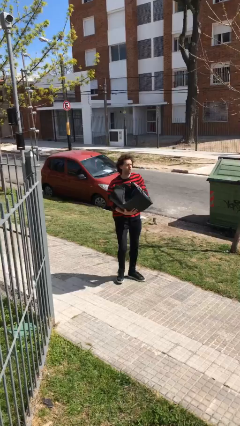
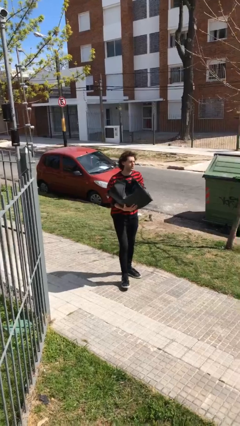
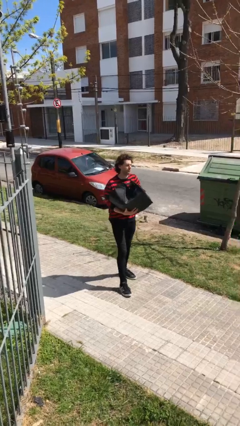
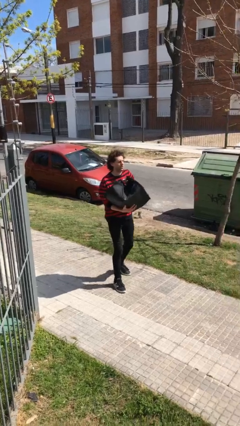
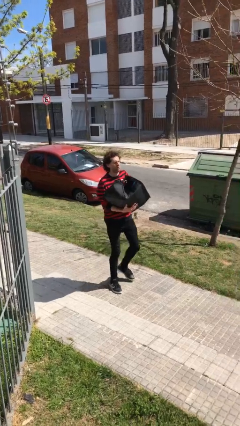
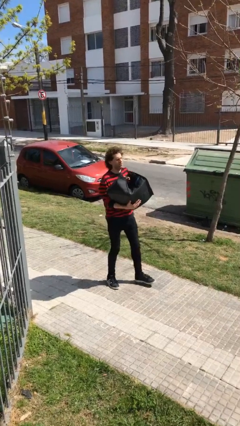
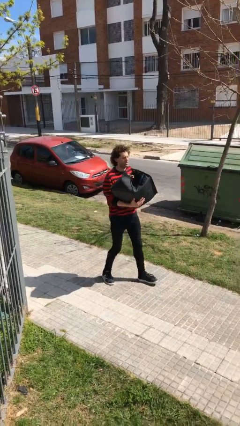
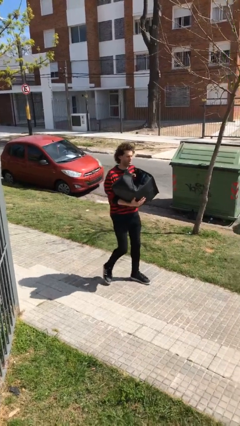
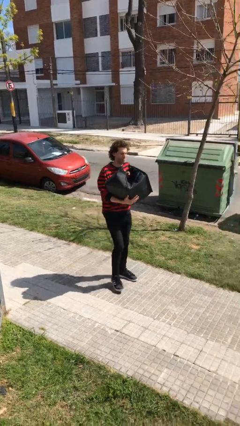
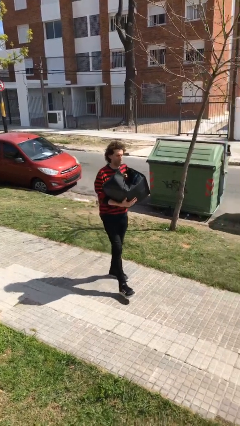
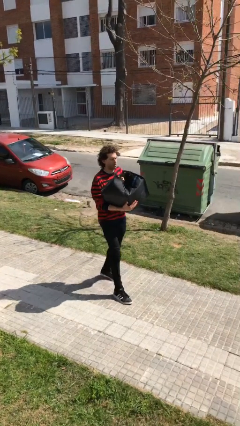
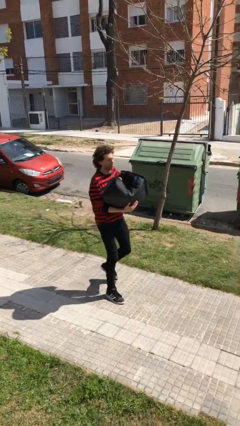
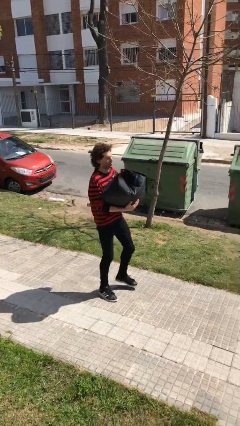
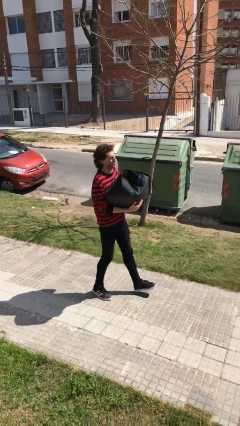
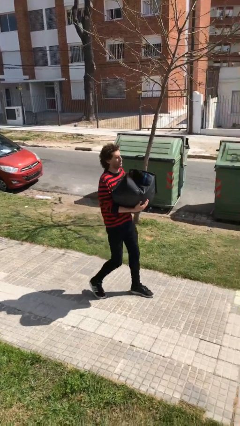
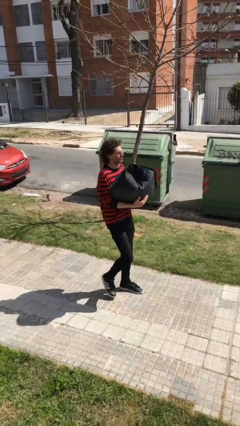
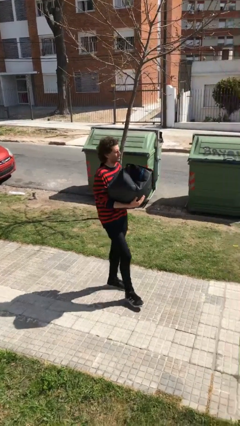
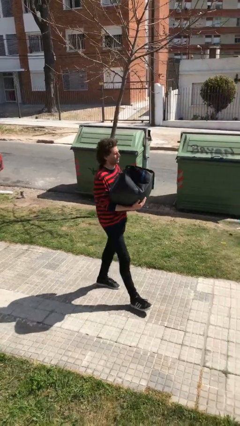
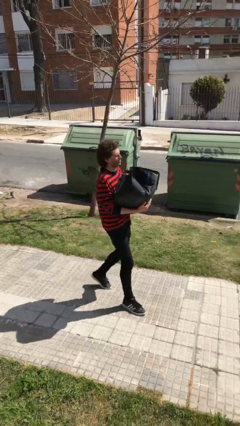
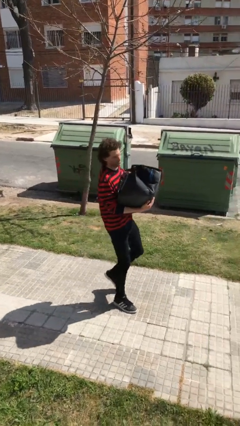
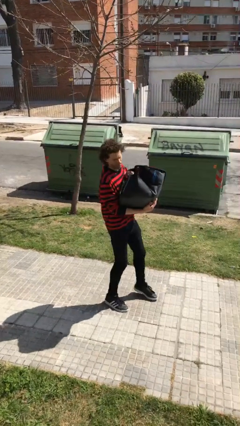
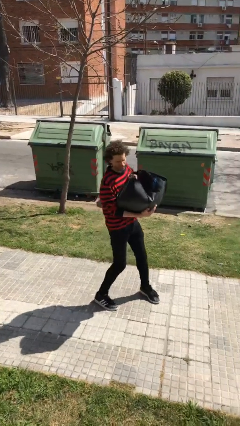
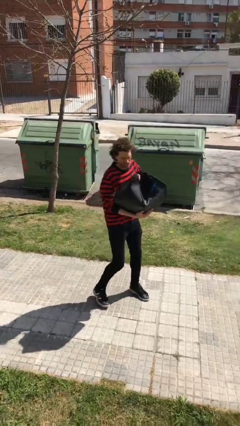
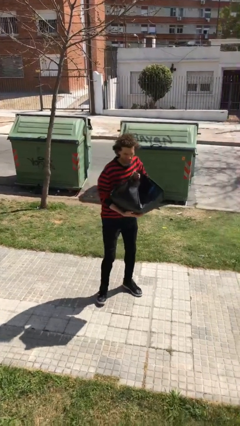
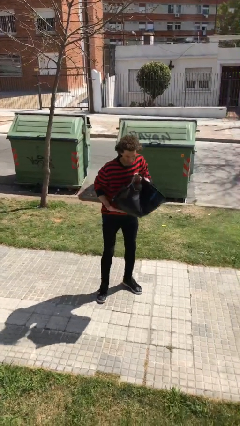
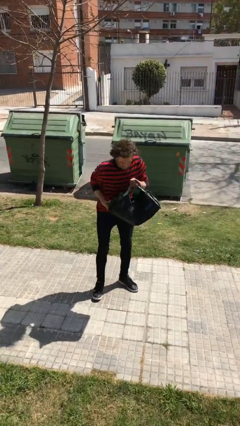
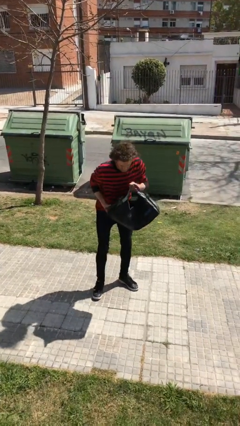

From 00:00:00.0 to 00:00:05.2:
person carries heavy object

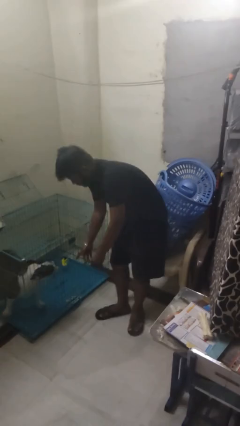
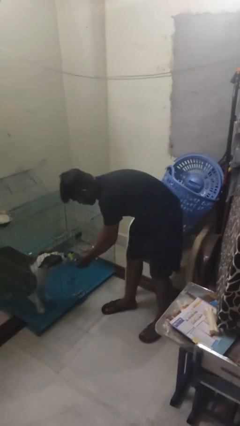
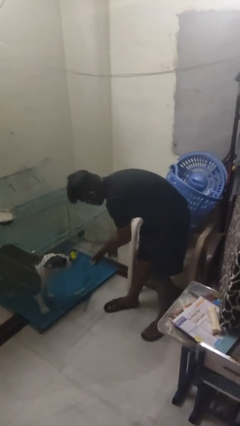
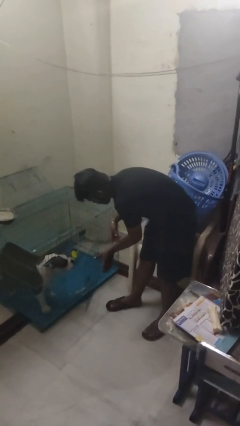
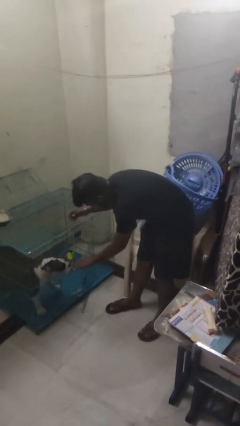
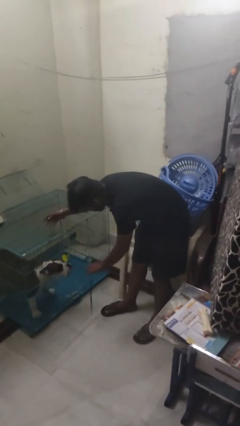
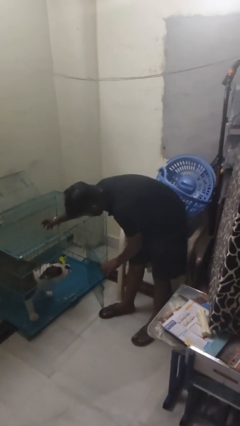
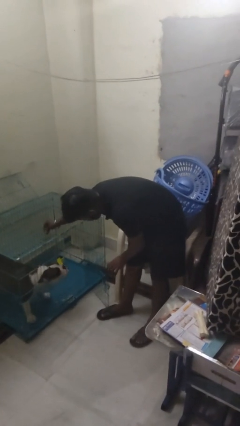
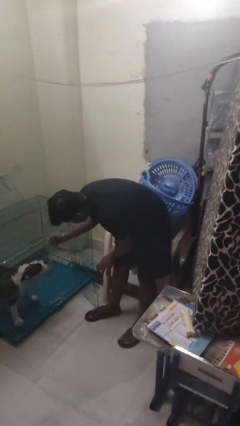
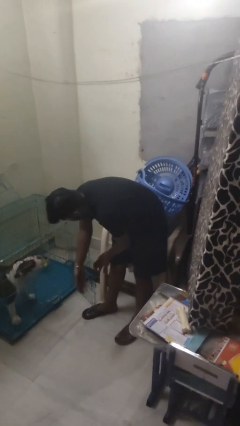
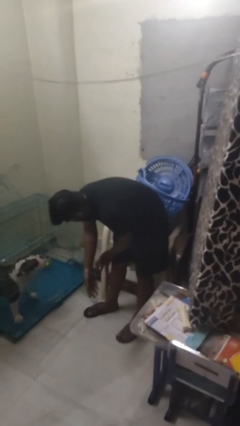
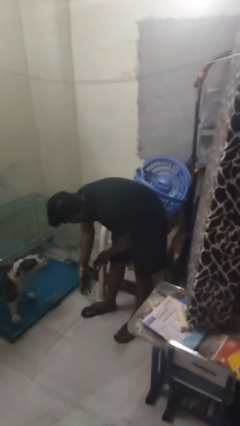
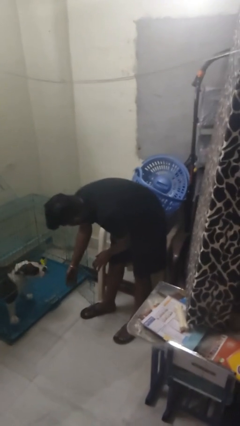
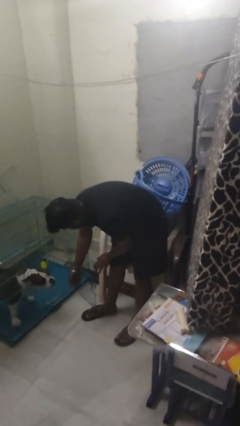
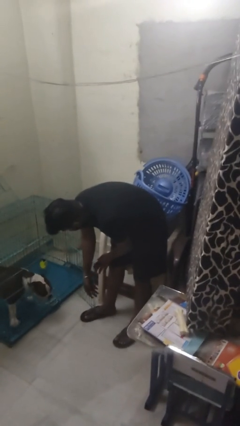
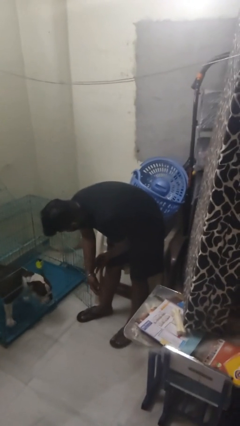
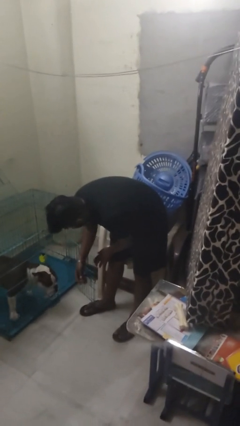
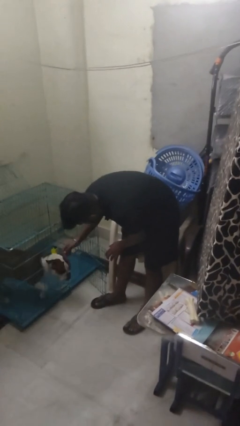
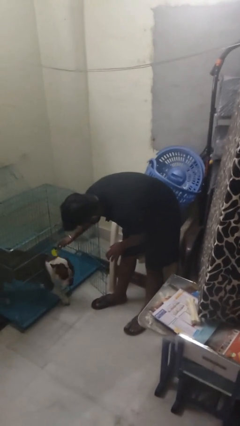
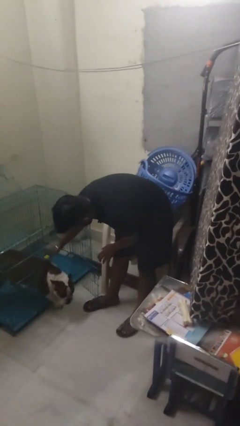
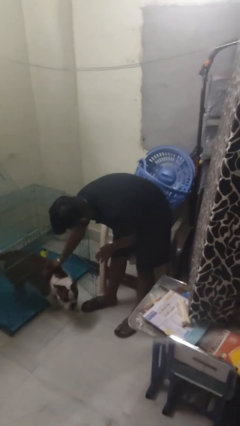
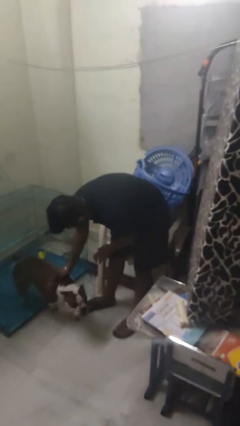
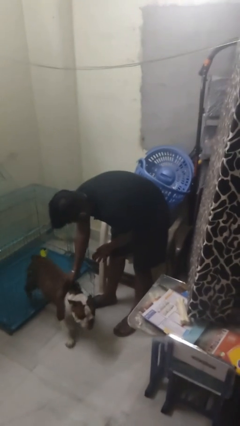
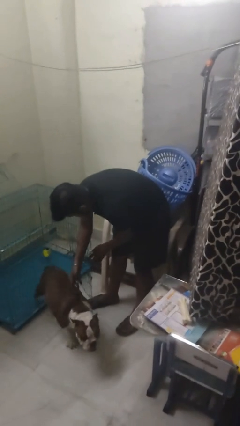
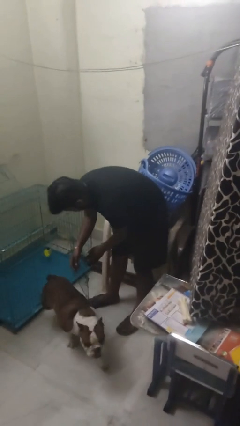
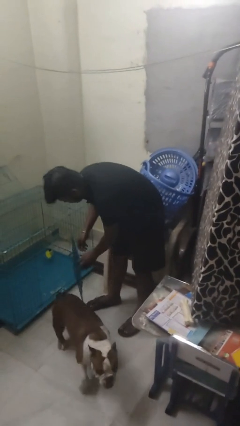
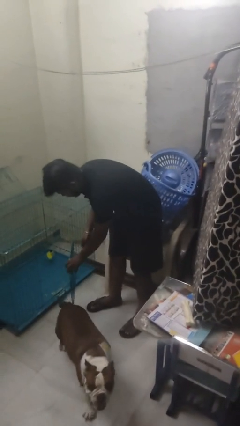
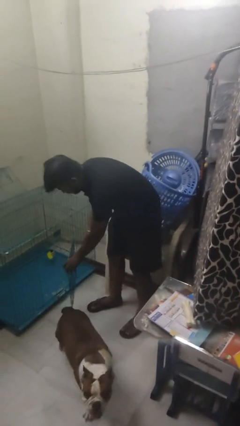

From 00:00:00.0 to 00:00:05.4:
person uncrates dog

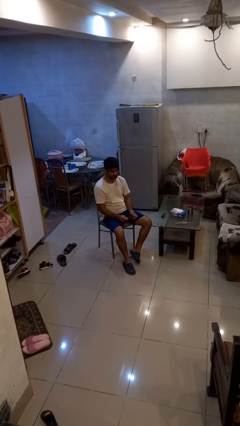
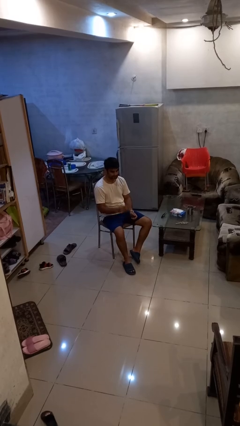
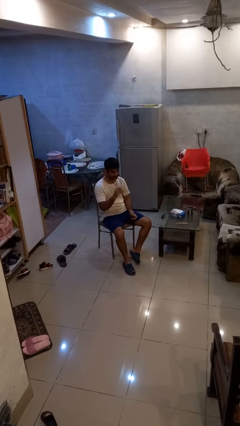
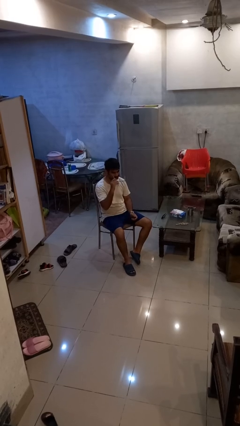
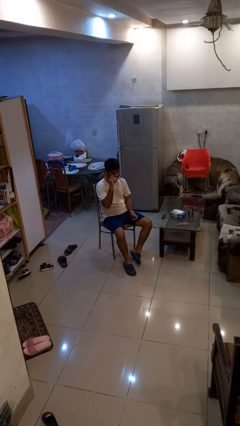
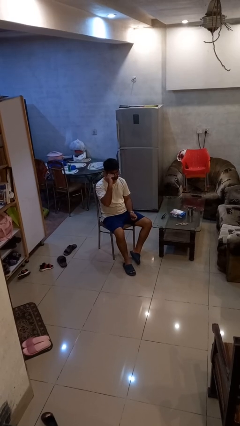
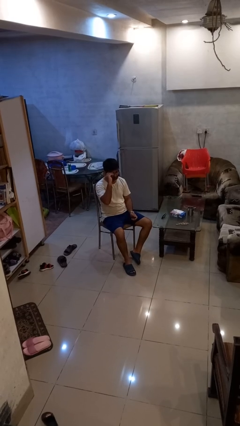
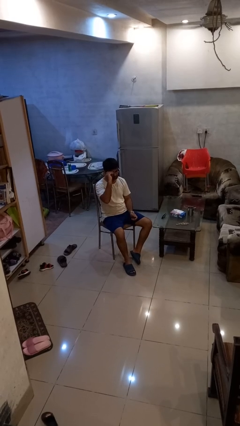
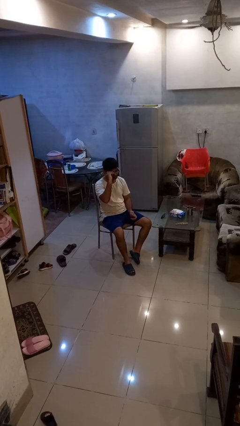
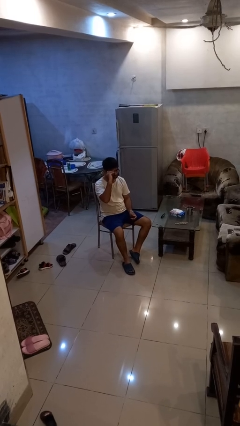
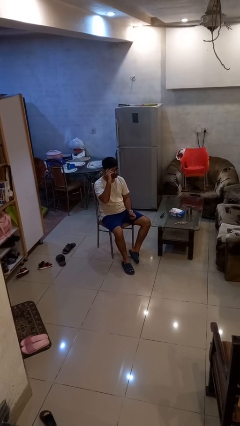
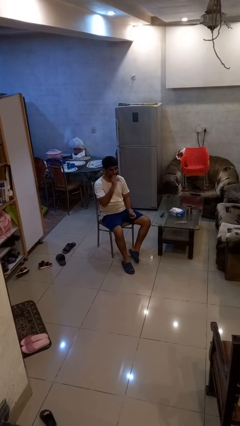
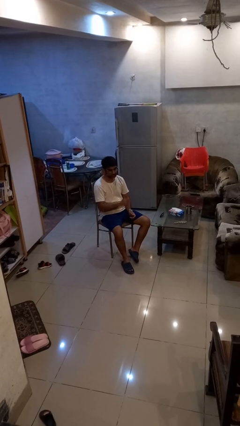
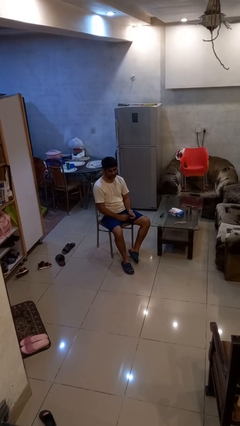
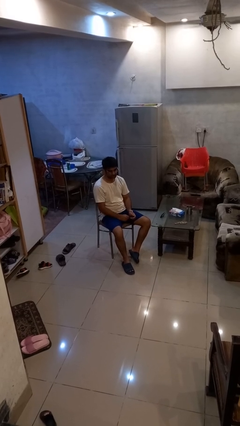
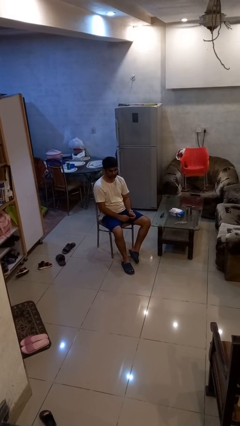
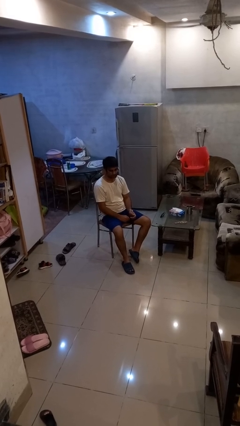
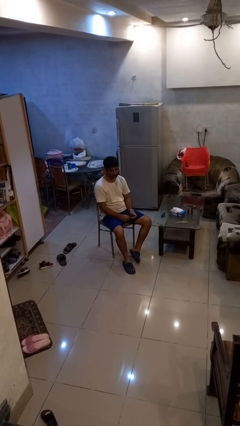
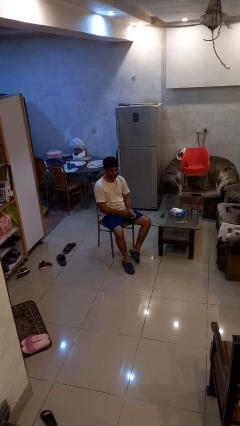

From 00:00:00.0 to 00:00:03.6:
person puts on glasses

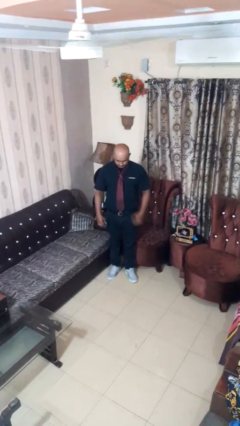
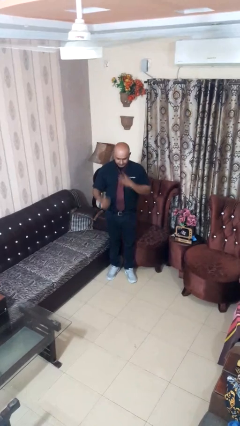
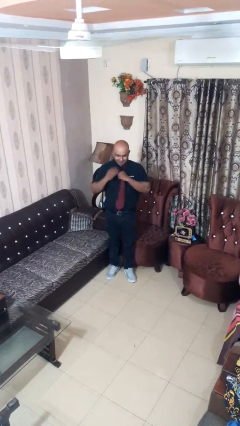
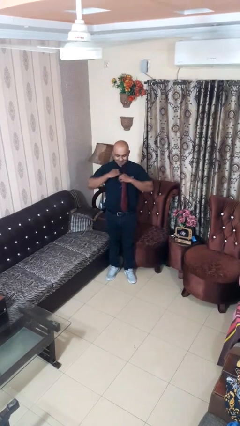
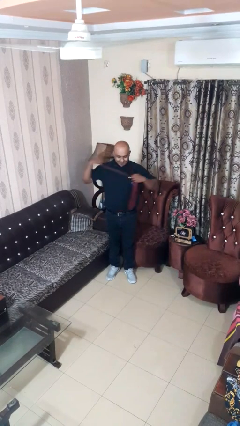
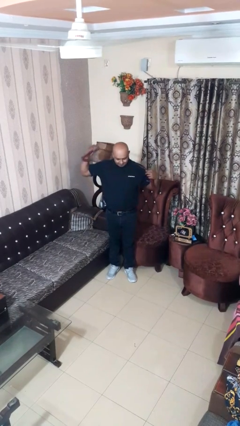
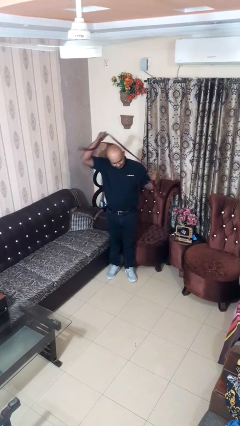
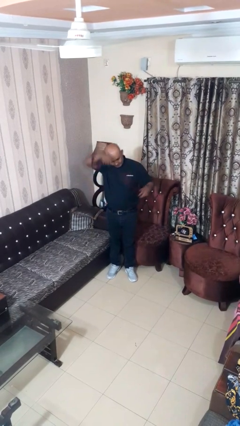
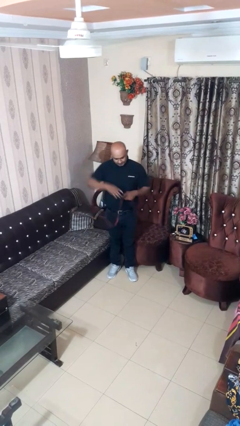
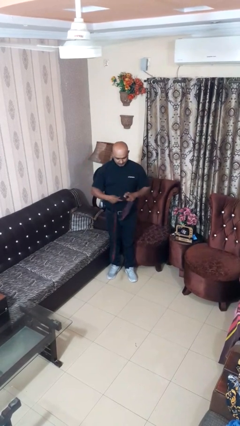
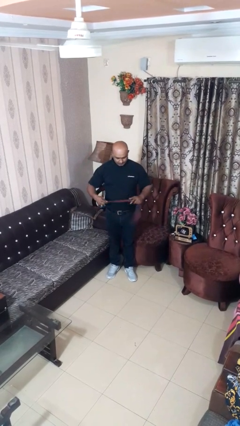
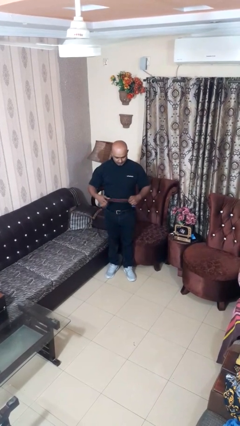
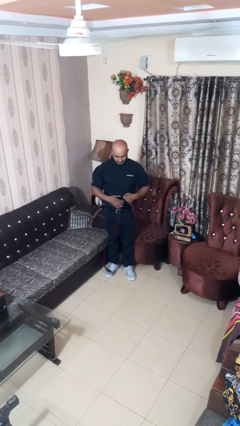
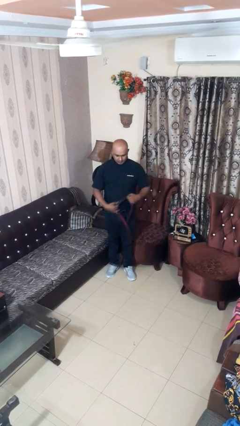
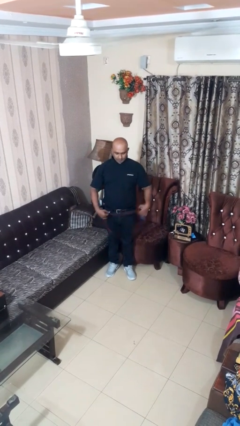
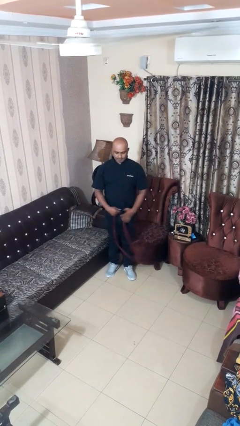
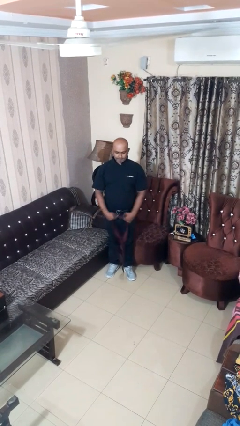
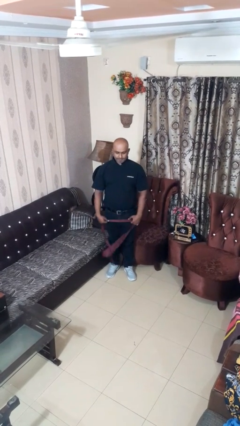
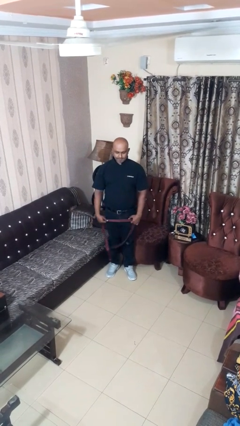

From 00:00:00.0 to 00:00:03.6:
person takes off necktie
